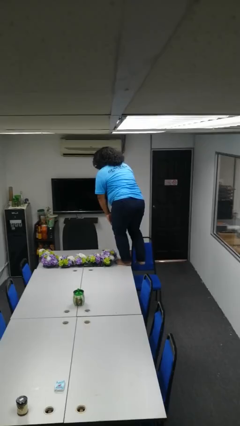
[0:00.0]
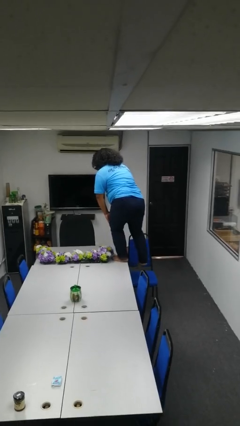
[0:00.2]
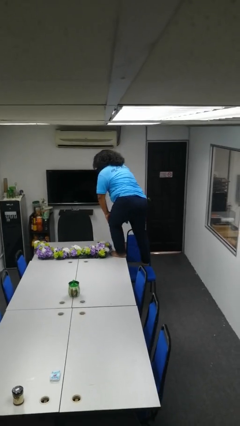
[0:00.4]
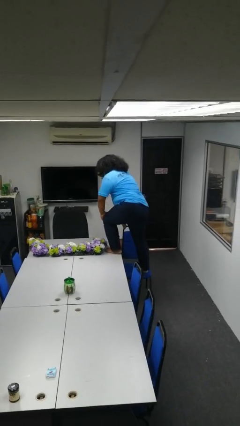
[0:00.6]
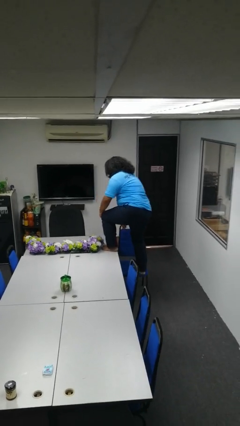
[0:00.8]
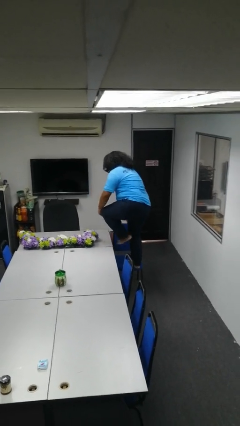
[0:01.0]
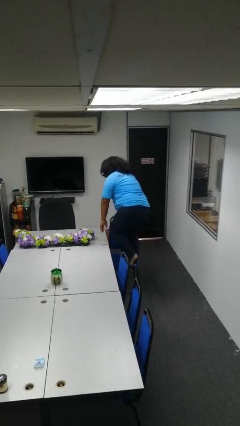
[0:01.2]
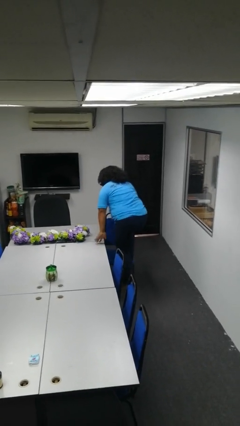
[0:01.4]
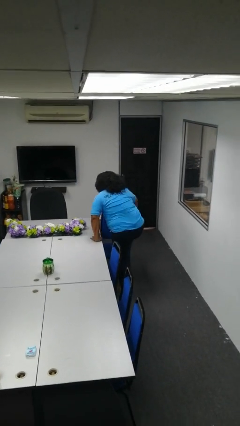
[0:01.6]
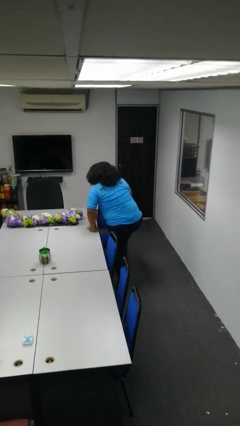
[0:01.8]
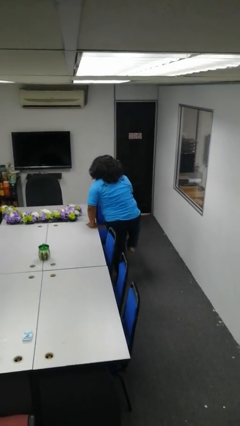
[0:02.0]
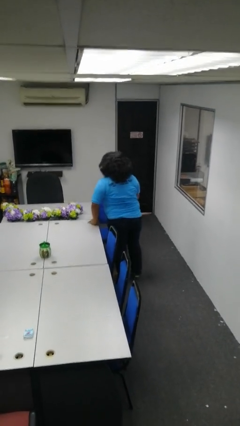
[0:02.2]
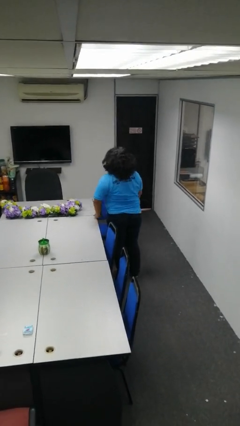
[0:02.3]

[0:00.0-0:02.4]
person climbs off table

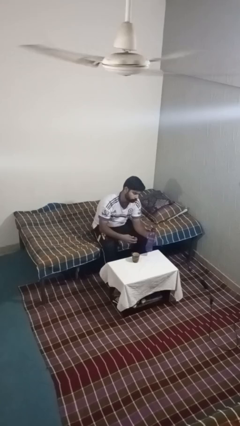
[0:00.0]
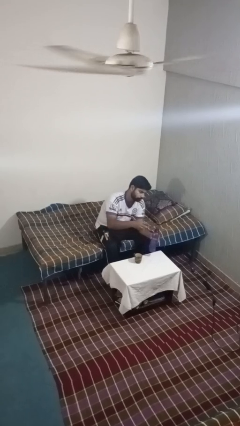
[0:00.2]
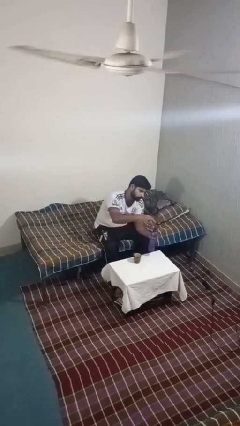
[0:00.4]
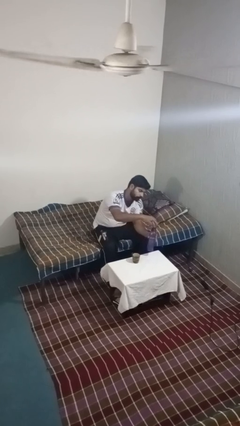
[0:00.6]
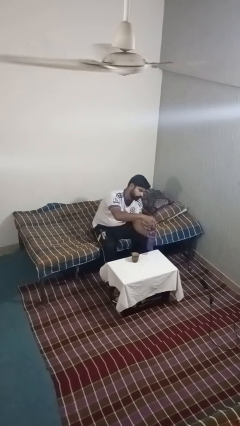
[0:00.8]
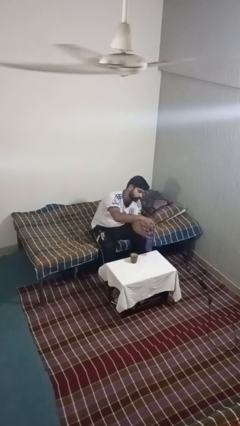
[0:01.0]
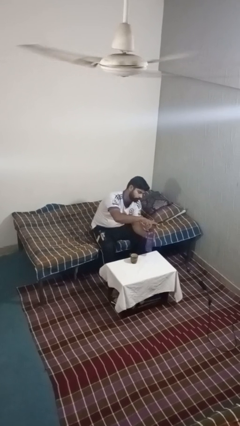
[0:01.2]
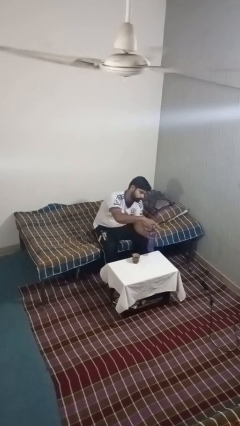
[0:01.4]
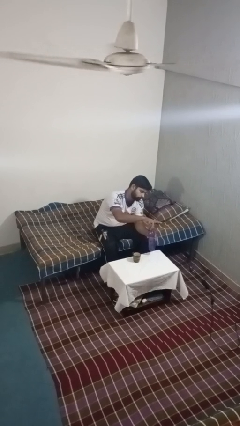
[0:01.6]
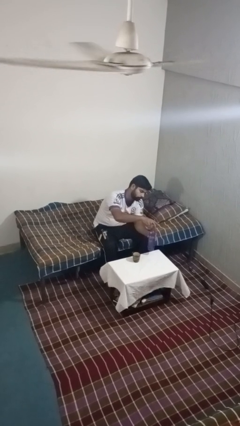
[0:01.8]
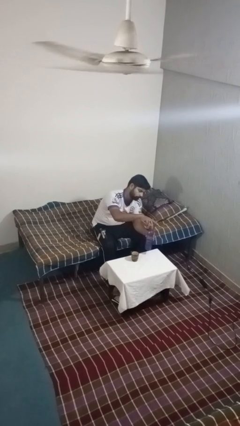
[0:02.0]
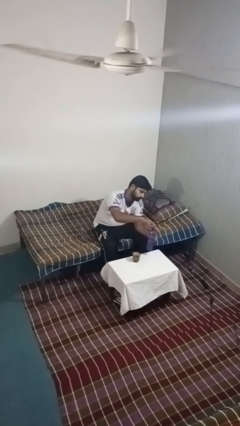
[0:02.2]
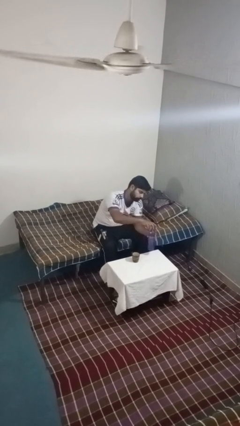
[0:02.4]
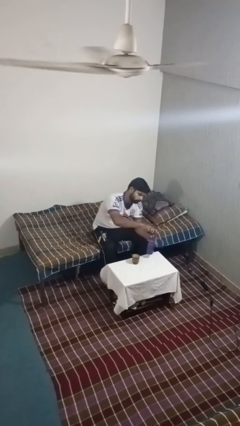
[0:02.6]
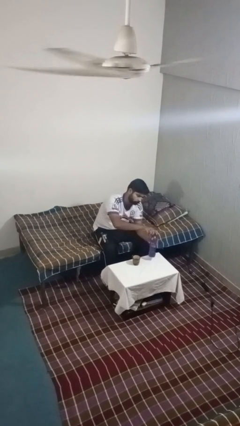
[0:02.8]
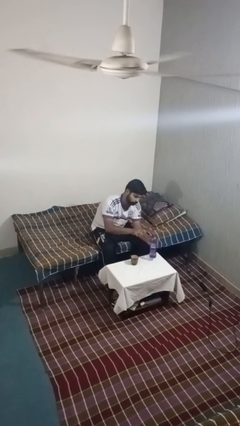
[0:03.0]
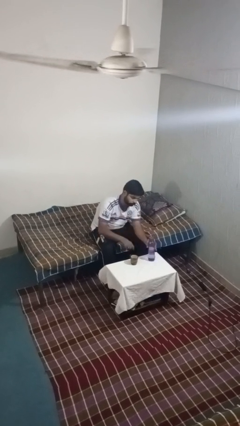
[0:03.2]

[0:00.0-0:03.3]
person screws lid to bottle

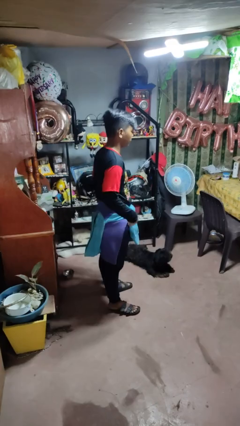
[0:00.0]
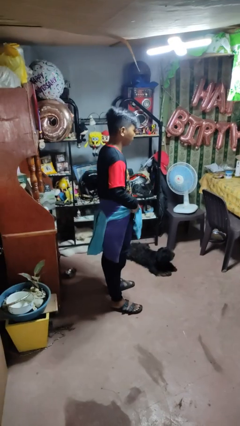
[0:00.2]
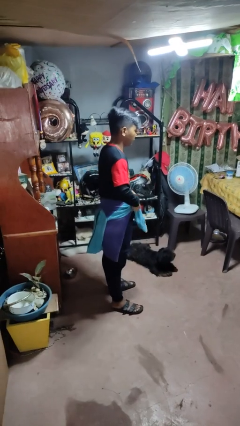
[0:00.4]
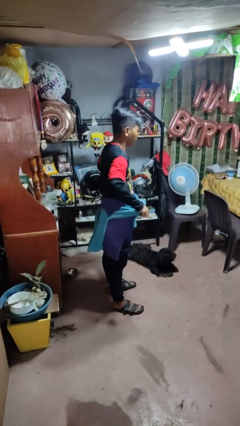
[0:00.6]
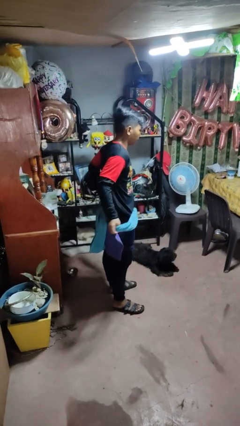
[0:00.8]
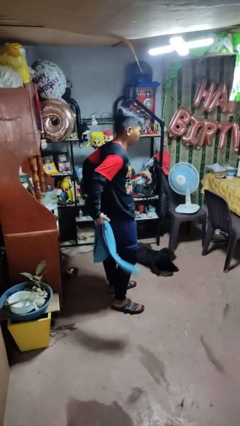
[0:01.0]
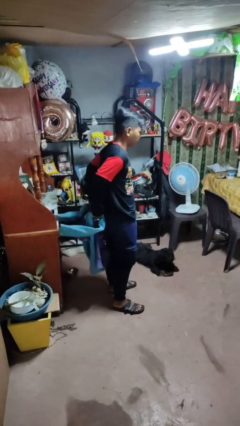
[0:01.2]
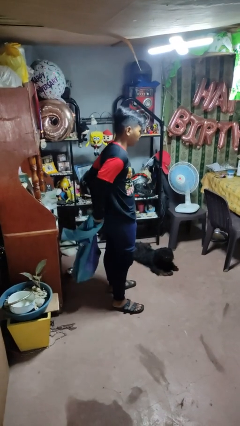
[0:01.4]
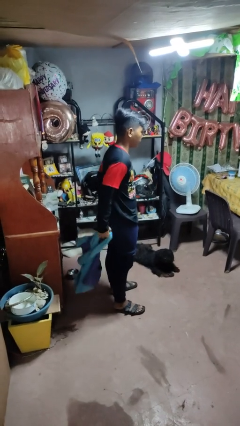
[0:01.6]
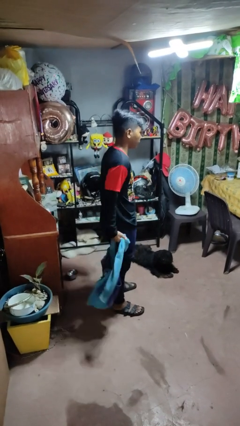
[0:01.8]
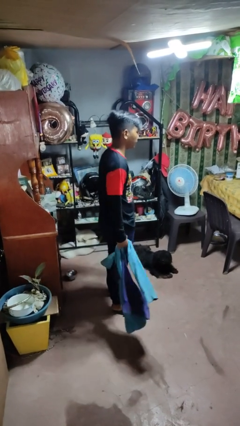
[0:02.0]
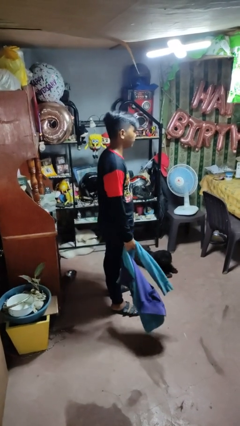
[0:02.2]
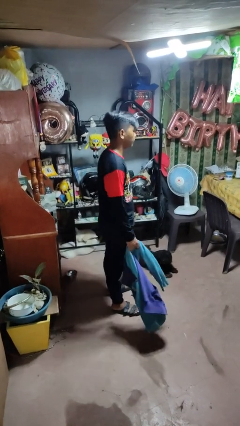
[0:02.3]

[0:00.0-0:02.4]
person unties jacket around waist

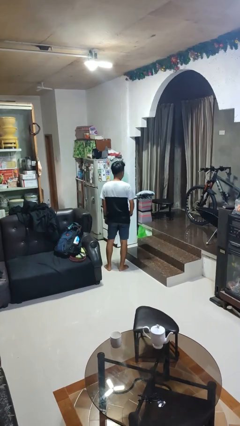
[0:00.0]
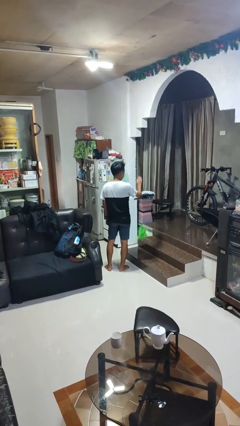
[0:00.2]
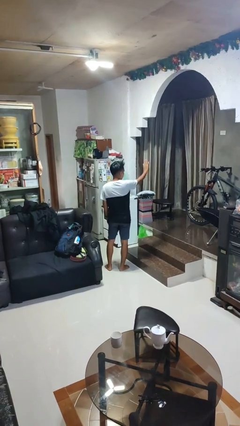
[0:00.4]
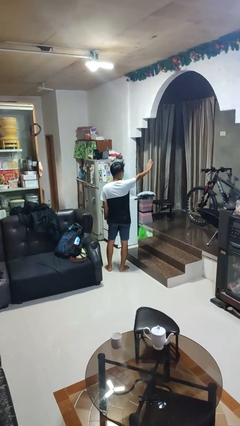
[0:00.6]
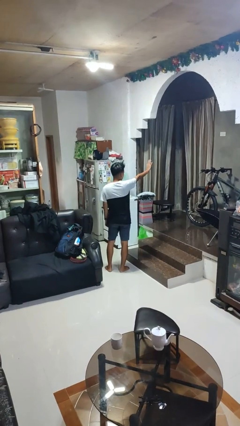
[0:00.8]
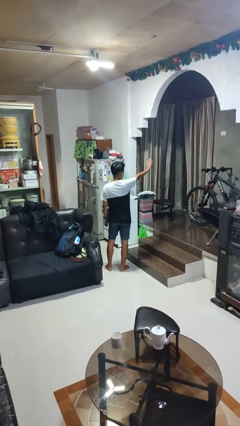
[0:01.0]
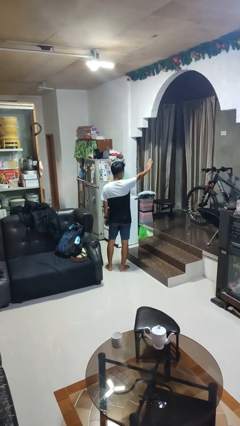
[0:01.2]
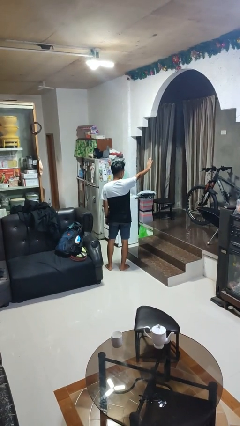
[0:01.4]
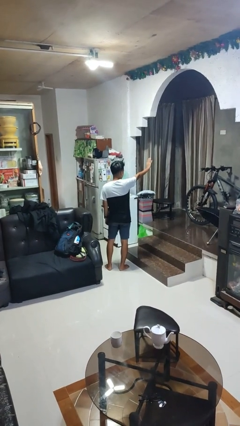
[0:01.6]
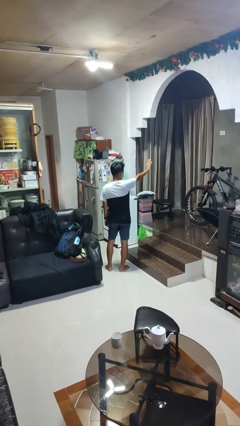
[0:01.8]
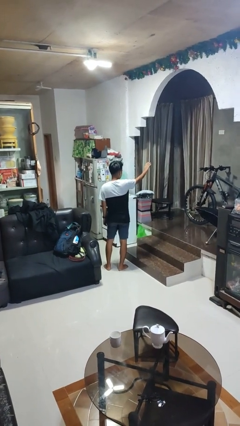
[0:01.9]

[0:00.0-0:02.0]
person gestures stop

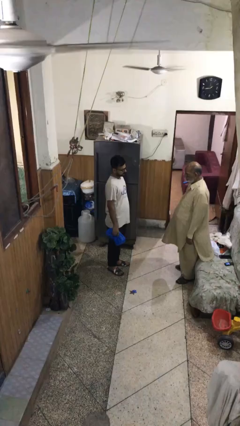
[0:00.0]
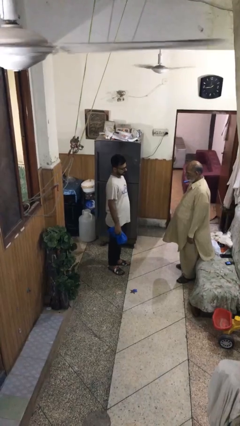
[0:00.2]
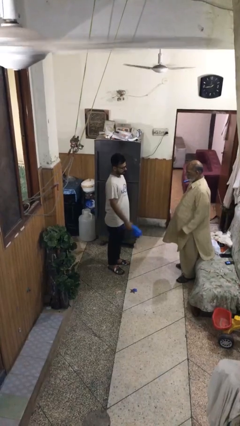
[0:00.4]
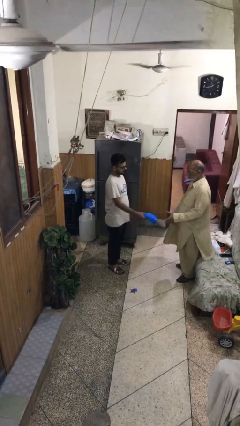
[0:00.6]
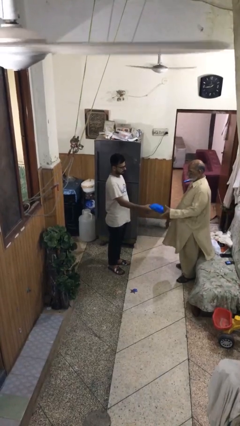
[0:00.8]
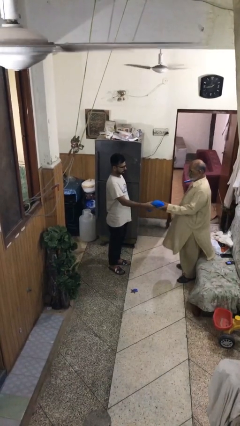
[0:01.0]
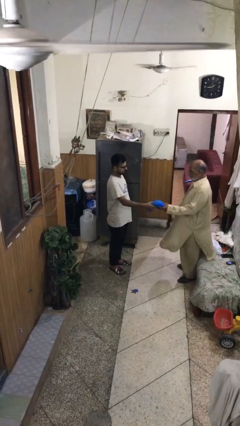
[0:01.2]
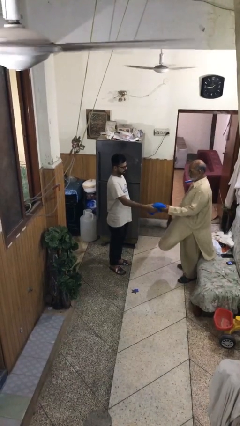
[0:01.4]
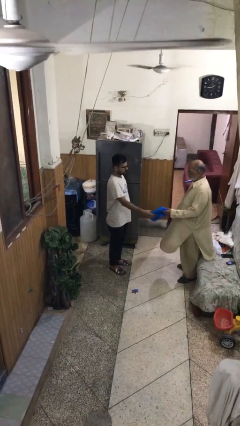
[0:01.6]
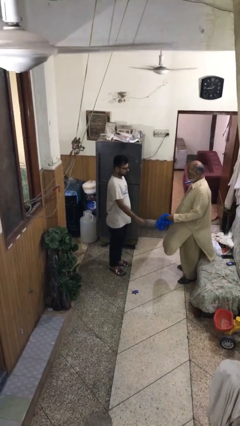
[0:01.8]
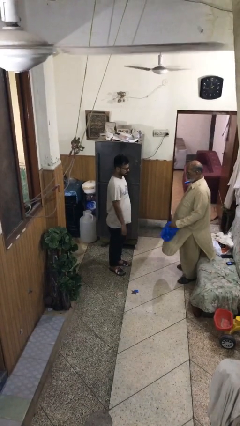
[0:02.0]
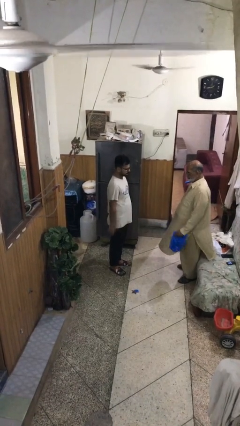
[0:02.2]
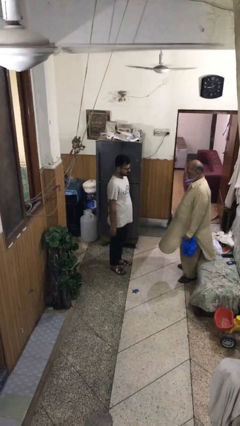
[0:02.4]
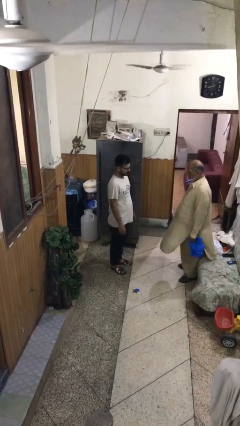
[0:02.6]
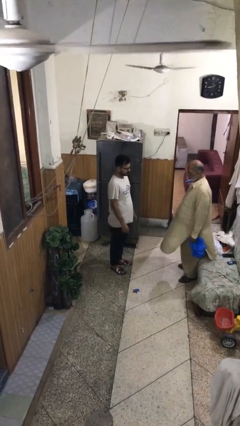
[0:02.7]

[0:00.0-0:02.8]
person transfers object to person

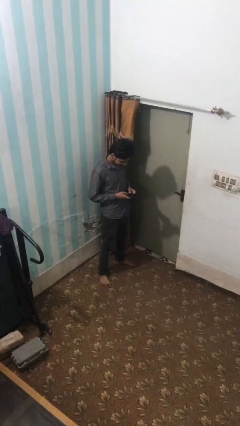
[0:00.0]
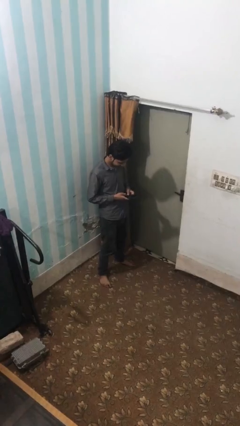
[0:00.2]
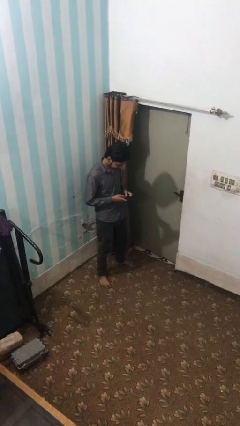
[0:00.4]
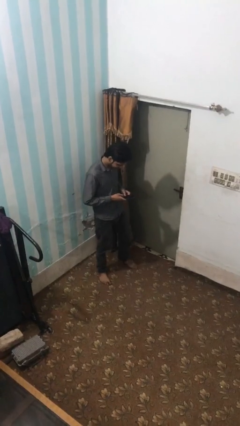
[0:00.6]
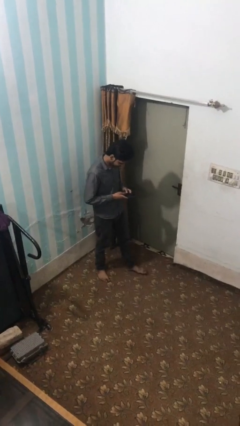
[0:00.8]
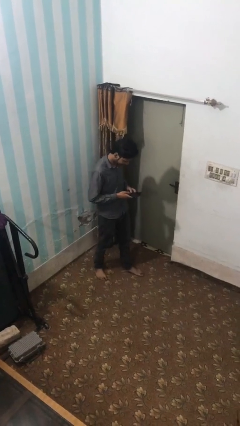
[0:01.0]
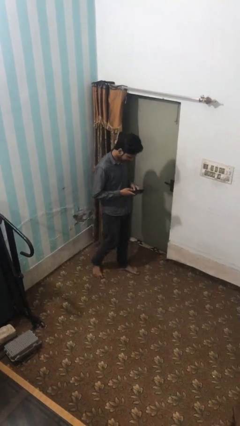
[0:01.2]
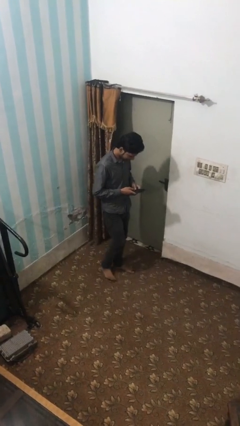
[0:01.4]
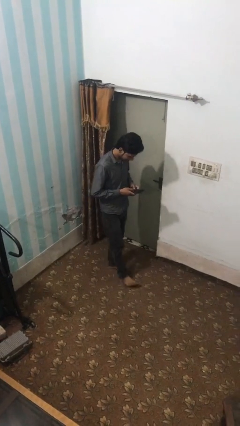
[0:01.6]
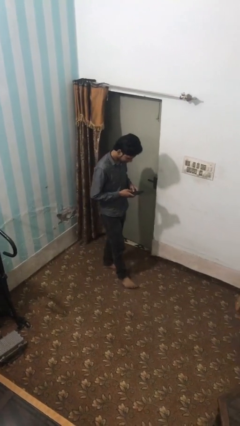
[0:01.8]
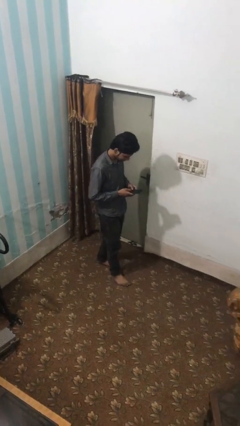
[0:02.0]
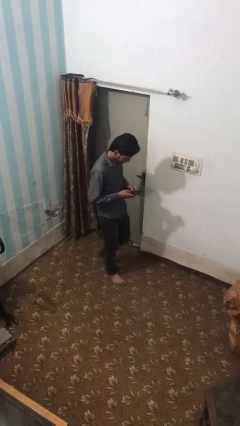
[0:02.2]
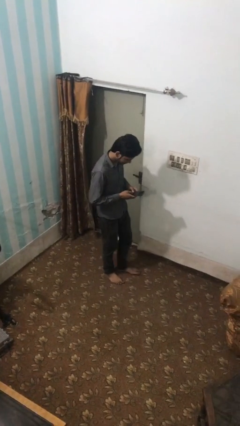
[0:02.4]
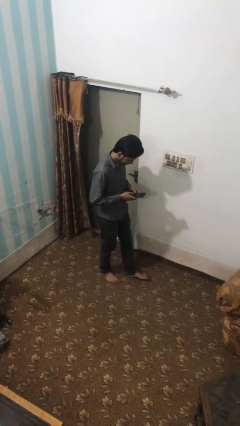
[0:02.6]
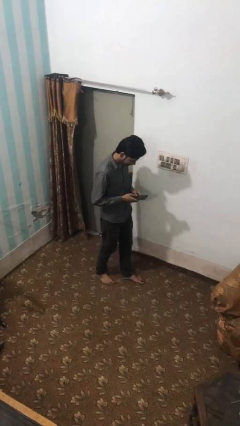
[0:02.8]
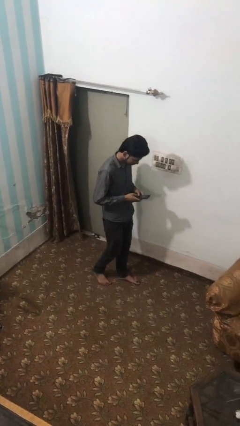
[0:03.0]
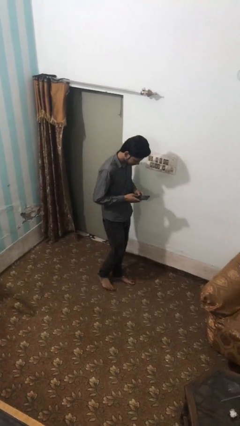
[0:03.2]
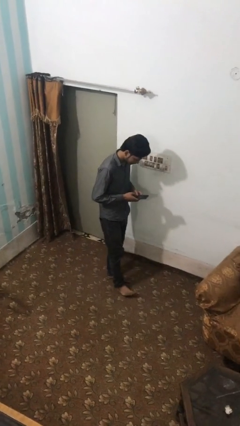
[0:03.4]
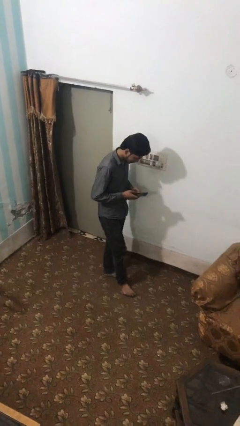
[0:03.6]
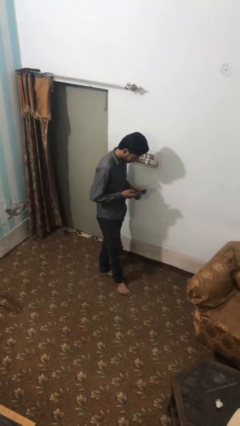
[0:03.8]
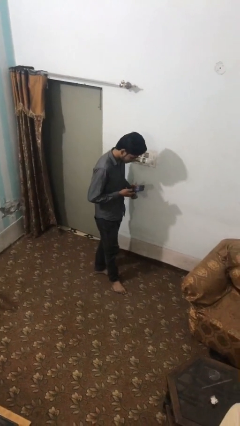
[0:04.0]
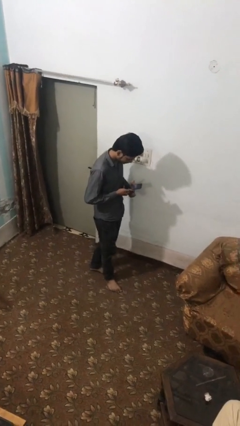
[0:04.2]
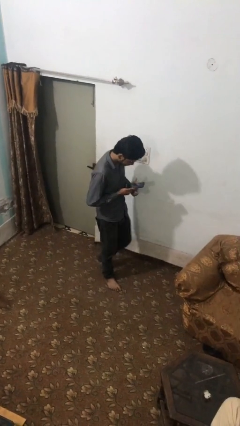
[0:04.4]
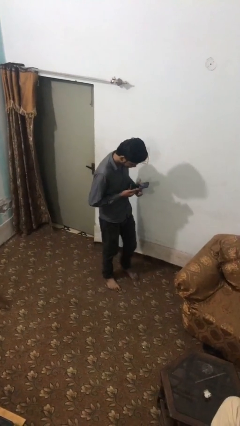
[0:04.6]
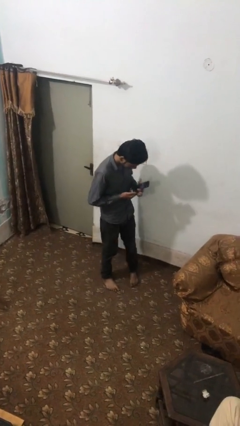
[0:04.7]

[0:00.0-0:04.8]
person texts on phone
